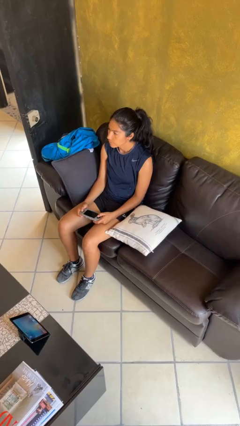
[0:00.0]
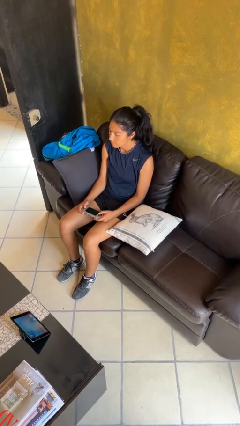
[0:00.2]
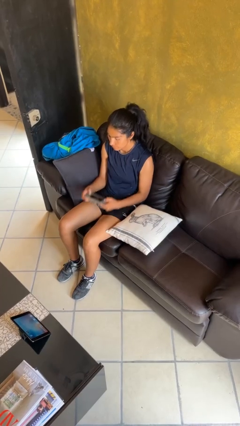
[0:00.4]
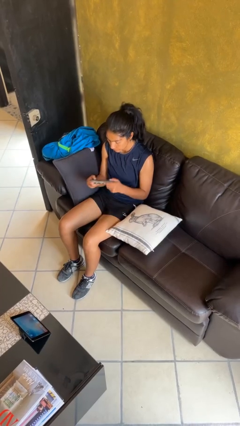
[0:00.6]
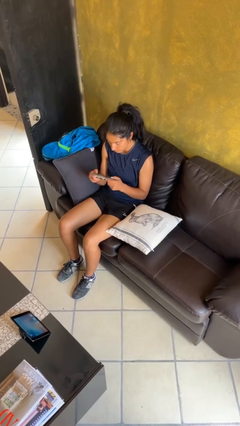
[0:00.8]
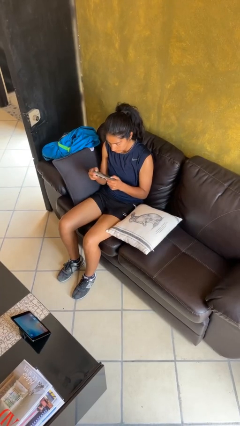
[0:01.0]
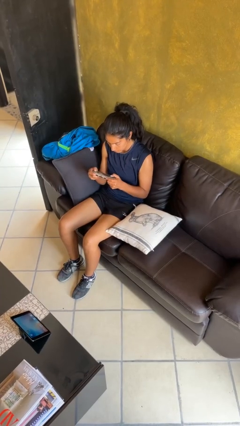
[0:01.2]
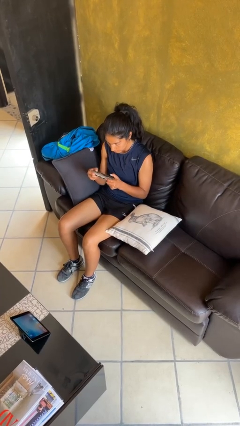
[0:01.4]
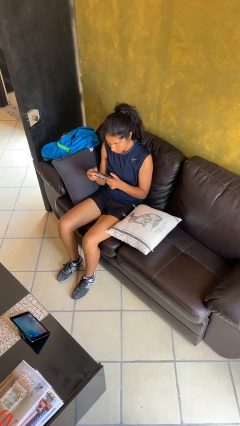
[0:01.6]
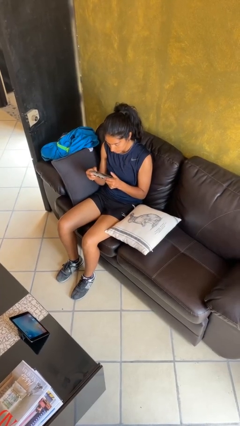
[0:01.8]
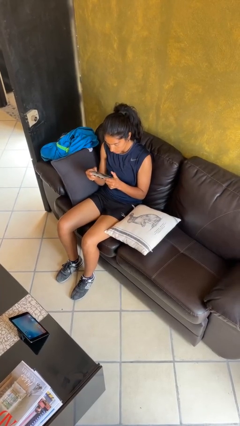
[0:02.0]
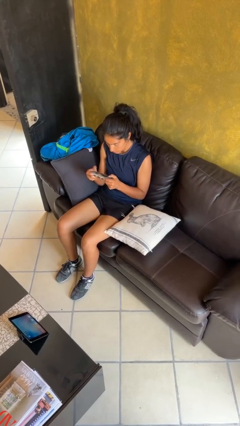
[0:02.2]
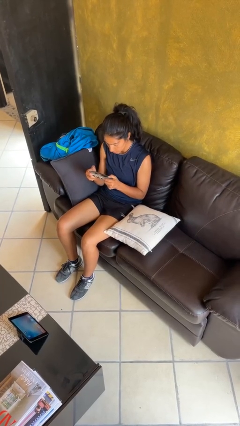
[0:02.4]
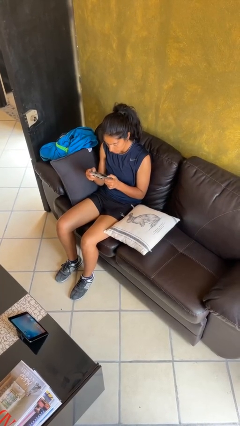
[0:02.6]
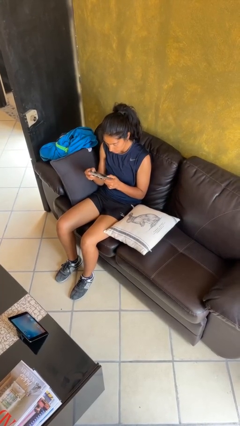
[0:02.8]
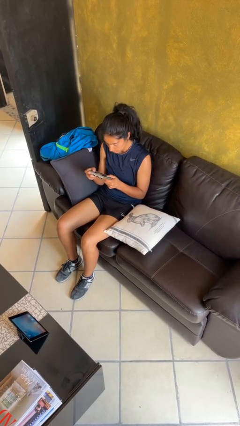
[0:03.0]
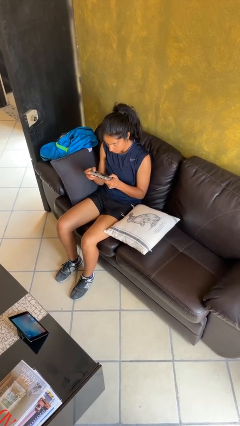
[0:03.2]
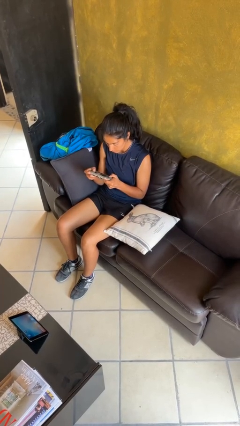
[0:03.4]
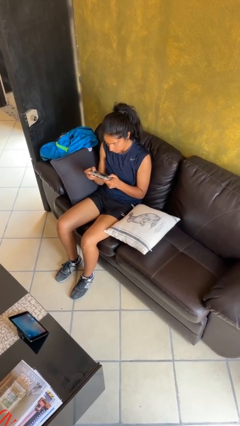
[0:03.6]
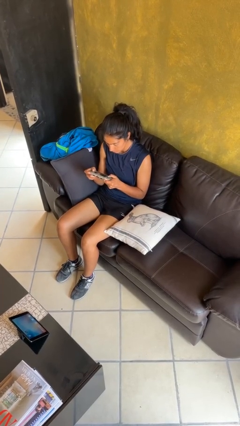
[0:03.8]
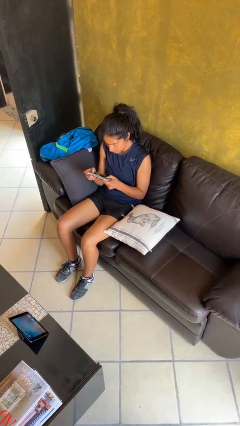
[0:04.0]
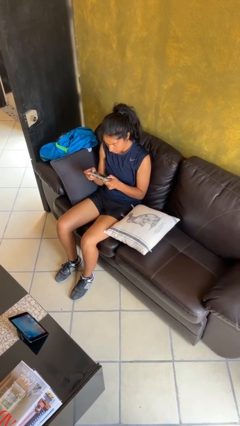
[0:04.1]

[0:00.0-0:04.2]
person interacts with handheld game

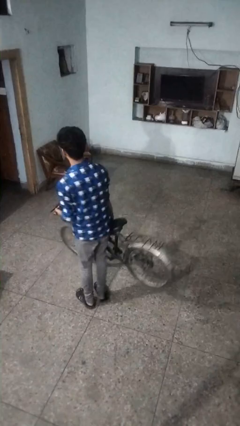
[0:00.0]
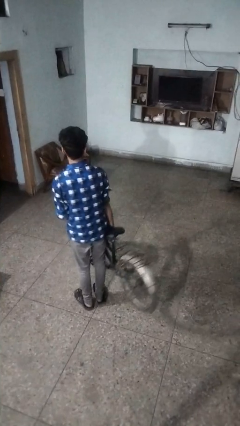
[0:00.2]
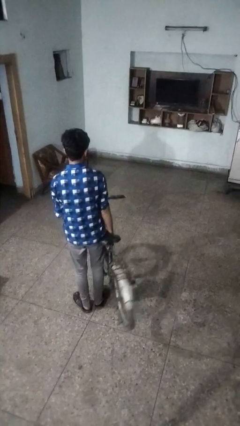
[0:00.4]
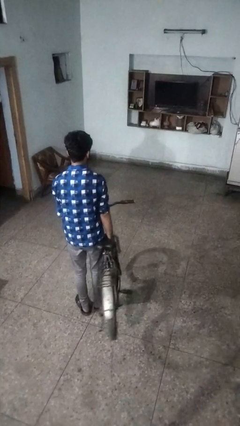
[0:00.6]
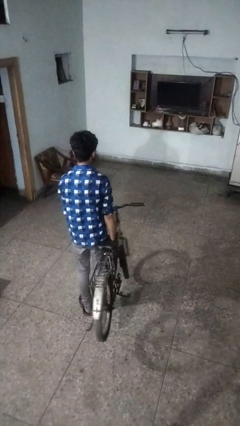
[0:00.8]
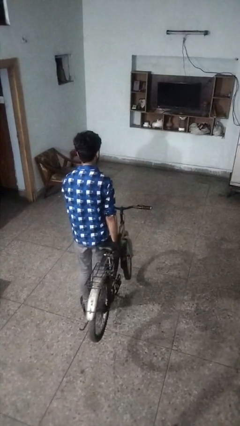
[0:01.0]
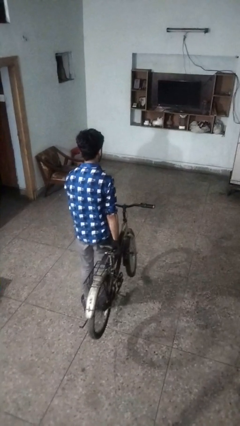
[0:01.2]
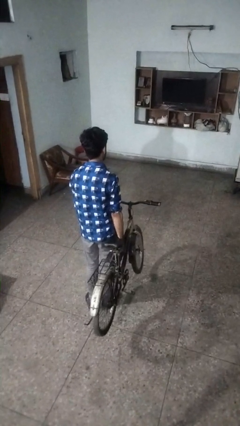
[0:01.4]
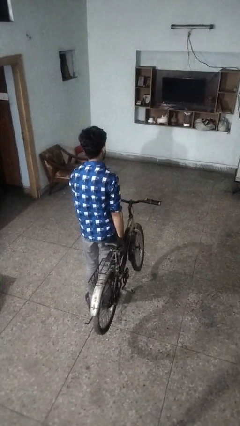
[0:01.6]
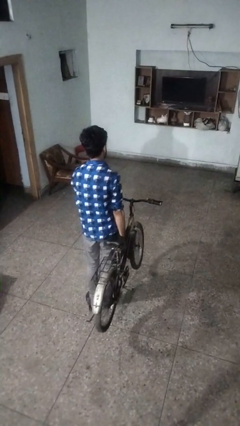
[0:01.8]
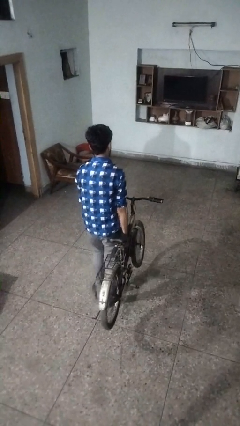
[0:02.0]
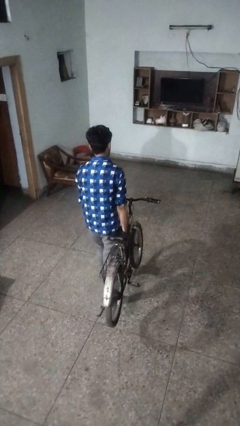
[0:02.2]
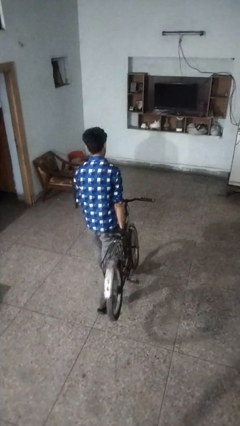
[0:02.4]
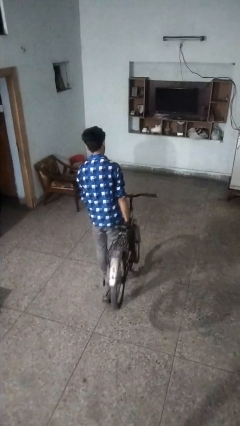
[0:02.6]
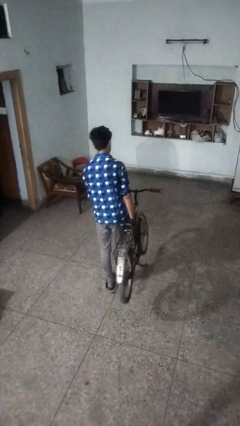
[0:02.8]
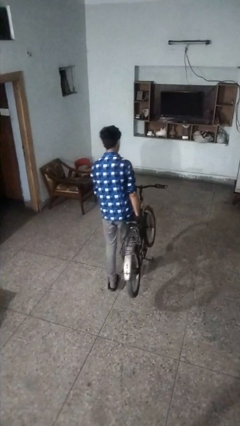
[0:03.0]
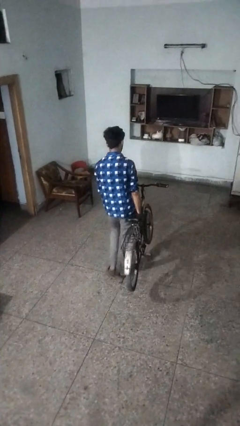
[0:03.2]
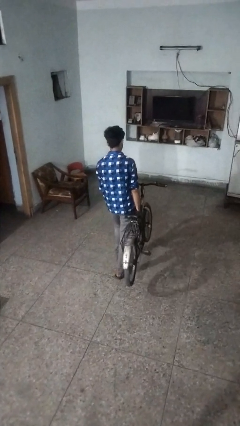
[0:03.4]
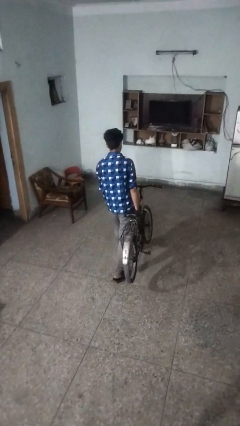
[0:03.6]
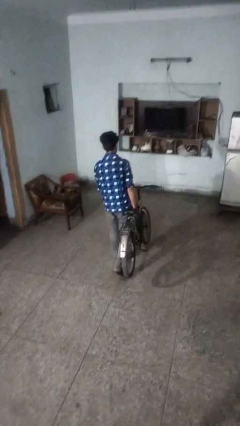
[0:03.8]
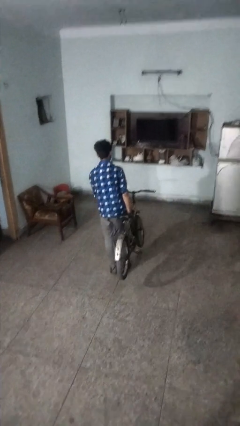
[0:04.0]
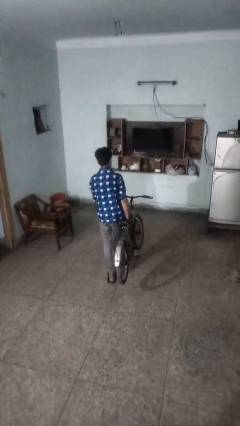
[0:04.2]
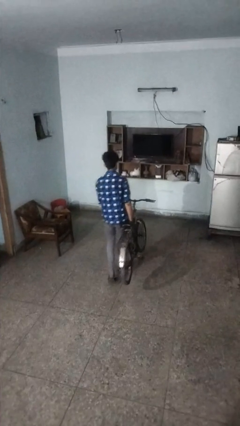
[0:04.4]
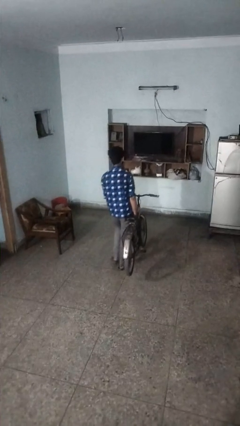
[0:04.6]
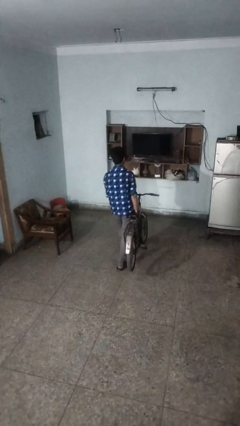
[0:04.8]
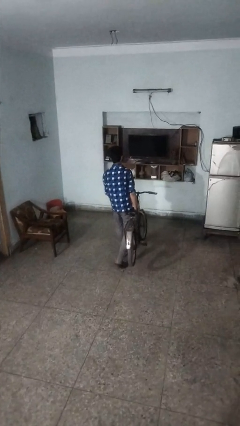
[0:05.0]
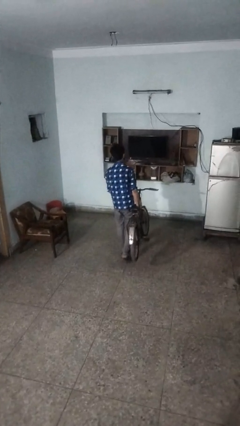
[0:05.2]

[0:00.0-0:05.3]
person carries bicycle

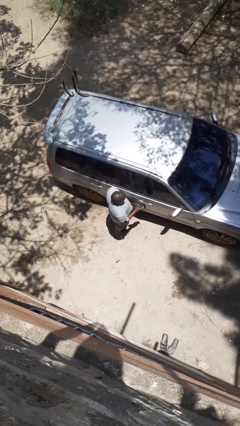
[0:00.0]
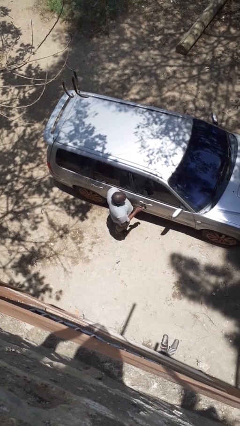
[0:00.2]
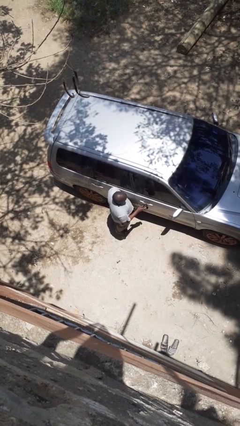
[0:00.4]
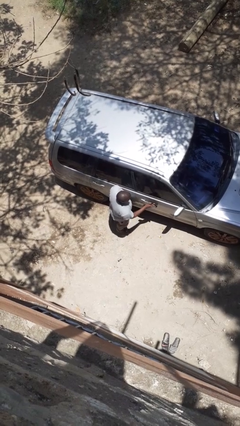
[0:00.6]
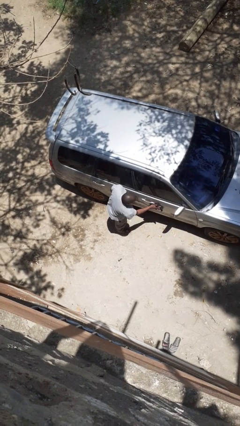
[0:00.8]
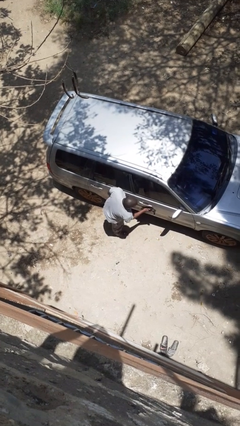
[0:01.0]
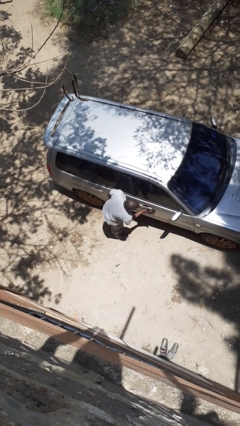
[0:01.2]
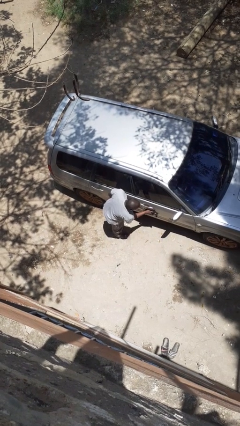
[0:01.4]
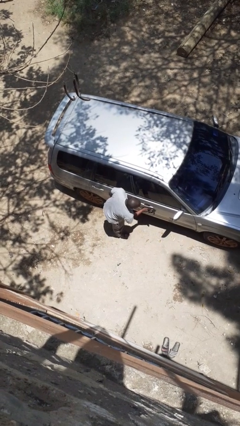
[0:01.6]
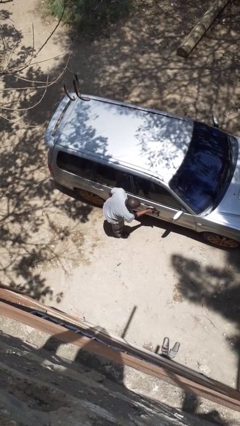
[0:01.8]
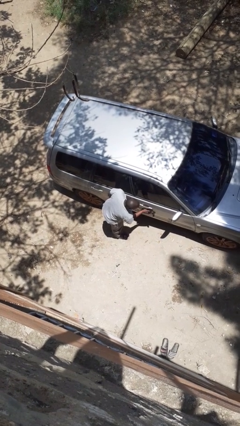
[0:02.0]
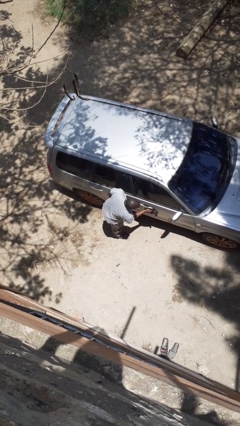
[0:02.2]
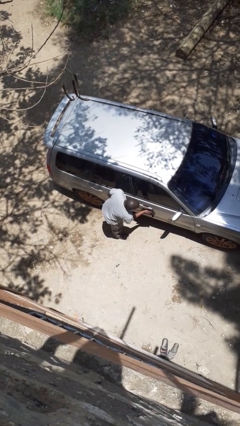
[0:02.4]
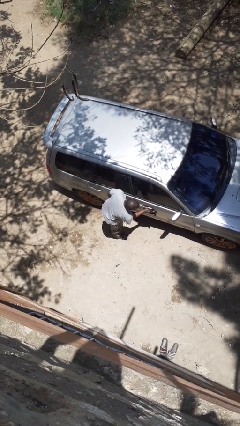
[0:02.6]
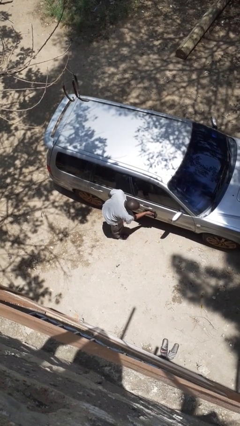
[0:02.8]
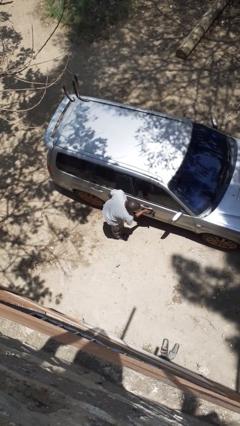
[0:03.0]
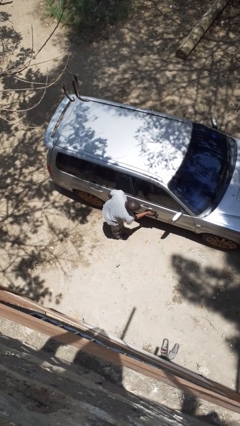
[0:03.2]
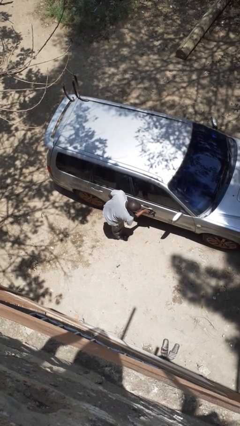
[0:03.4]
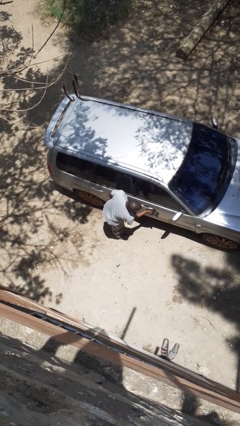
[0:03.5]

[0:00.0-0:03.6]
person polishes car with rag

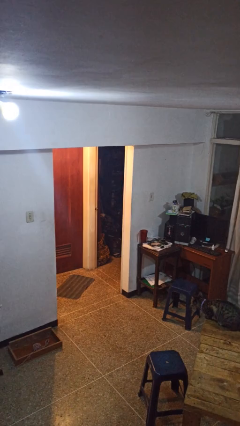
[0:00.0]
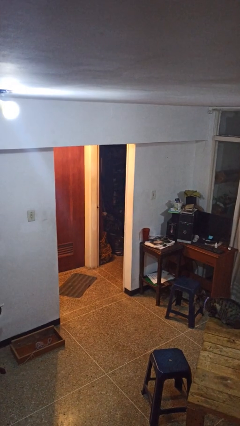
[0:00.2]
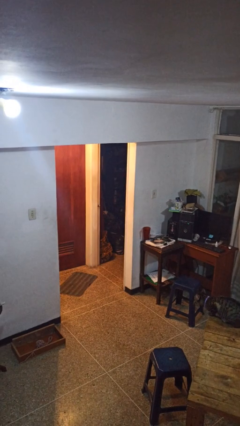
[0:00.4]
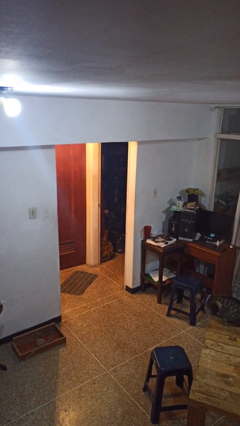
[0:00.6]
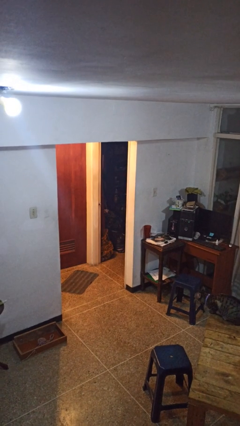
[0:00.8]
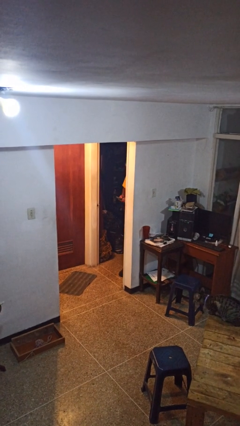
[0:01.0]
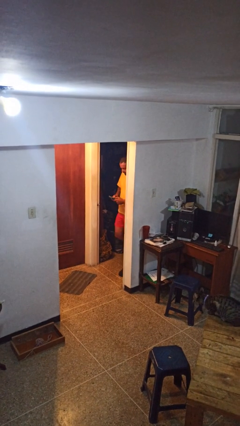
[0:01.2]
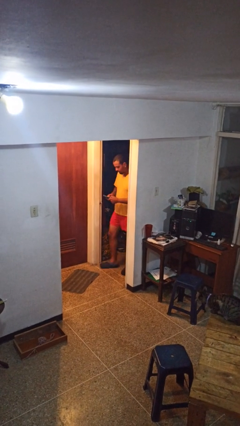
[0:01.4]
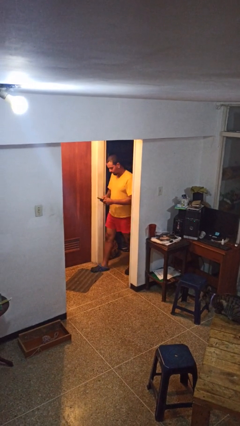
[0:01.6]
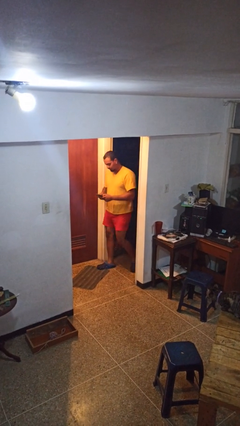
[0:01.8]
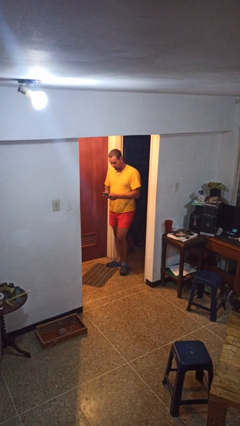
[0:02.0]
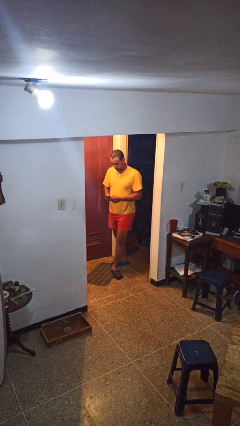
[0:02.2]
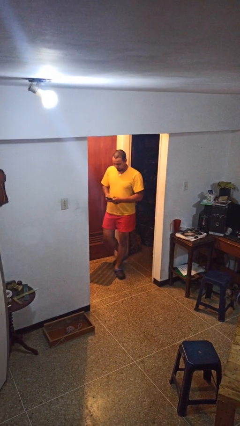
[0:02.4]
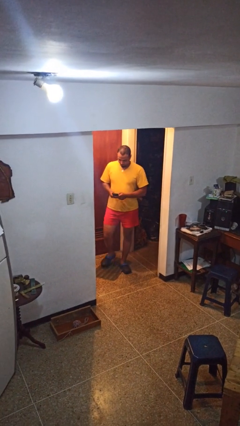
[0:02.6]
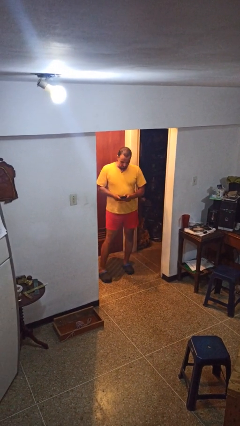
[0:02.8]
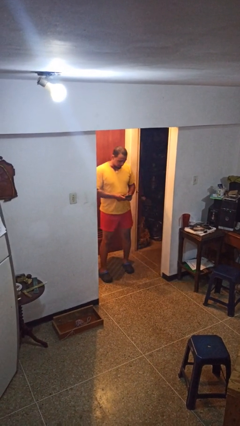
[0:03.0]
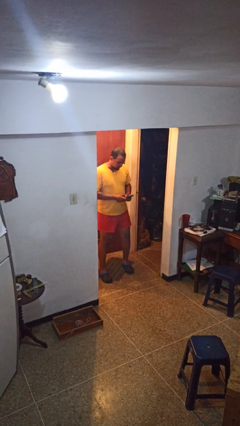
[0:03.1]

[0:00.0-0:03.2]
person enters scene through structure

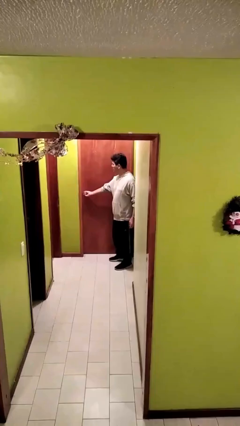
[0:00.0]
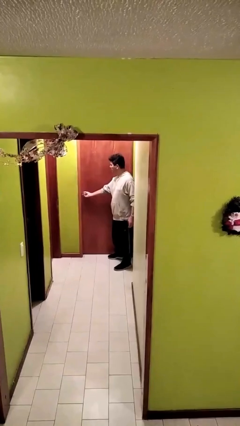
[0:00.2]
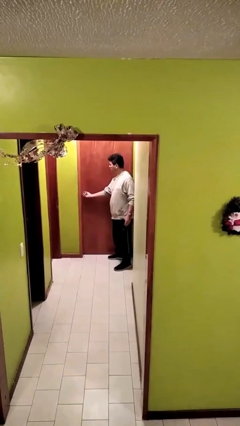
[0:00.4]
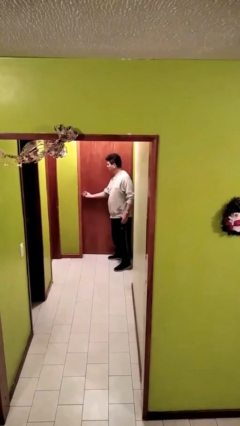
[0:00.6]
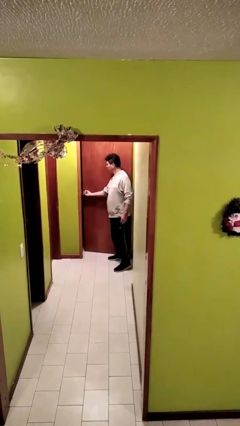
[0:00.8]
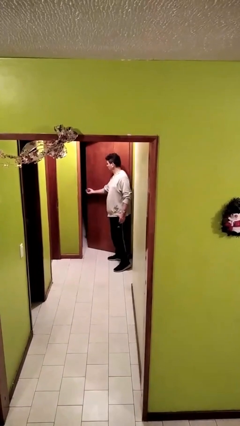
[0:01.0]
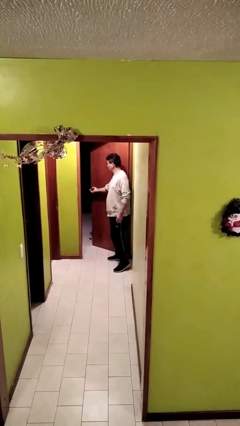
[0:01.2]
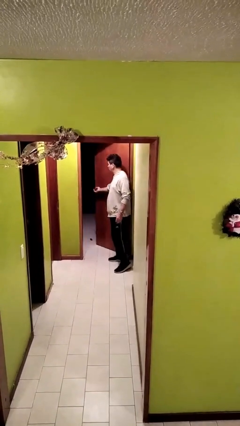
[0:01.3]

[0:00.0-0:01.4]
person opens facility door
